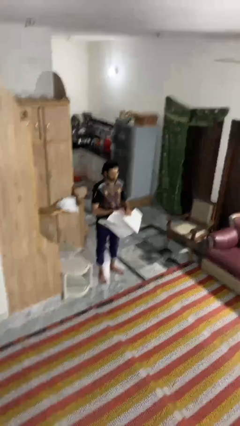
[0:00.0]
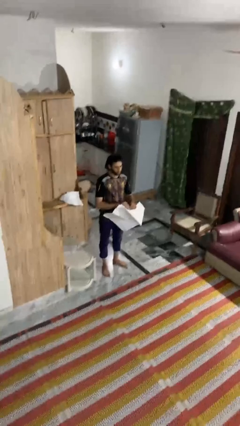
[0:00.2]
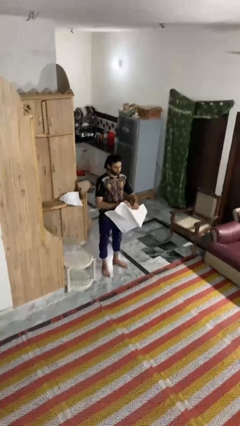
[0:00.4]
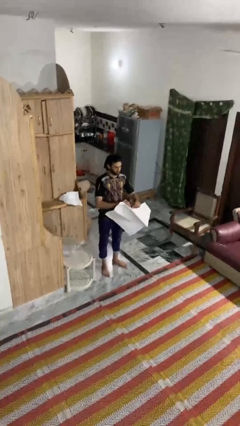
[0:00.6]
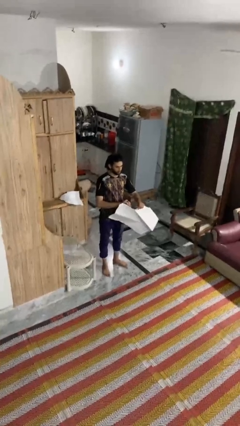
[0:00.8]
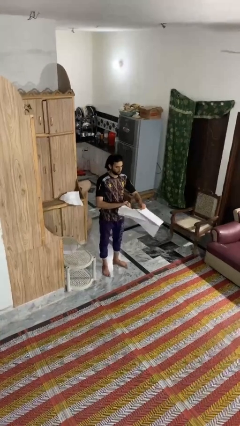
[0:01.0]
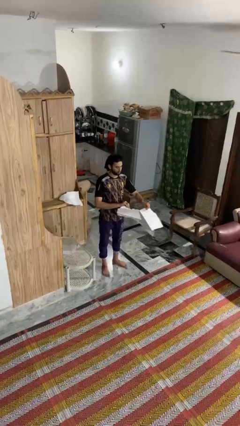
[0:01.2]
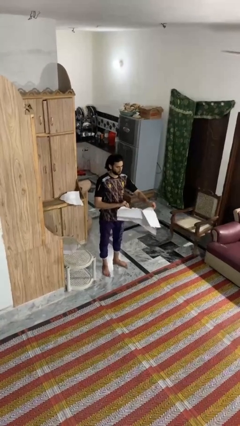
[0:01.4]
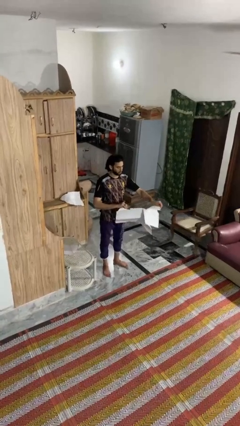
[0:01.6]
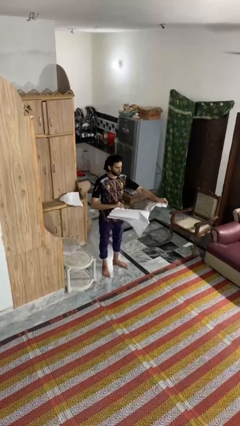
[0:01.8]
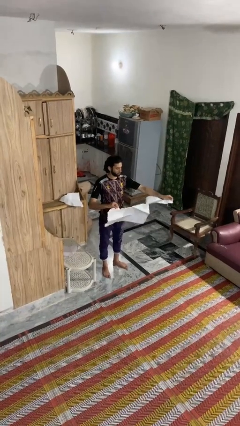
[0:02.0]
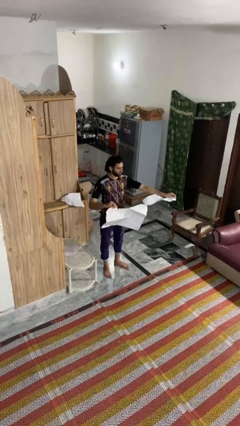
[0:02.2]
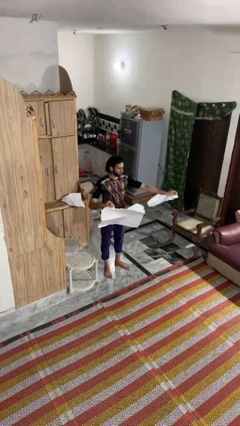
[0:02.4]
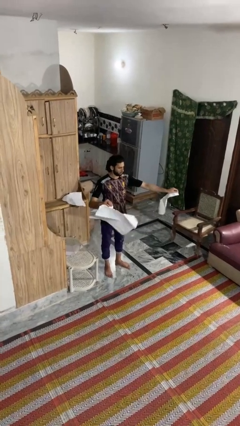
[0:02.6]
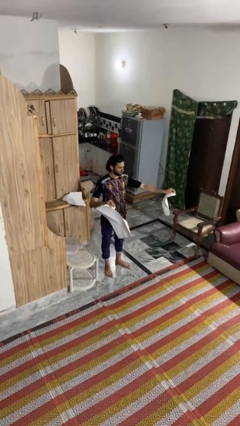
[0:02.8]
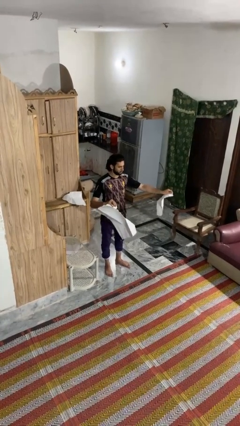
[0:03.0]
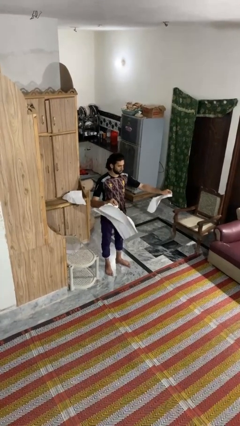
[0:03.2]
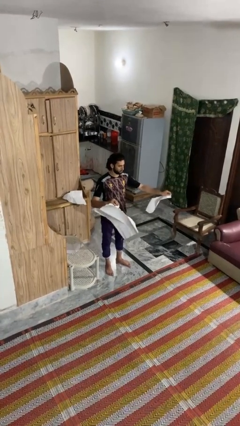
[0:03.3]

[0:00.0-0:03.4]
person tears paper

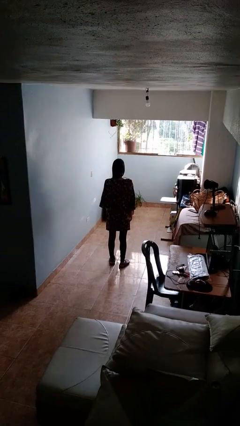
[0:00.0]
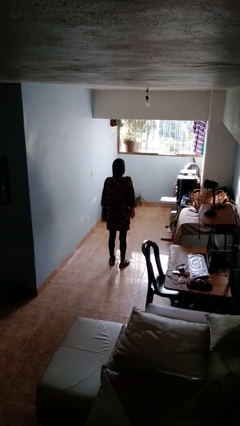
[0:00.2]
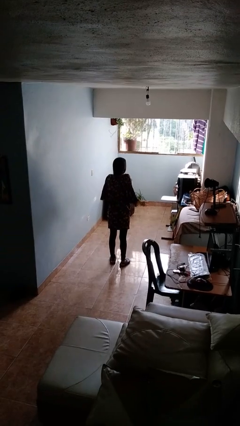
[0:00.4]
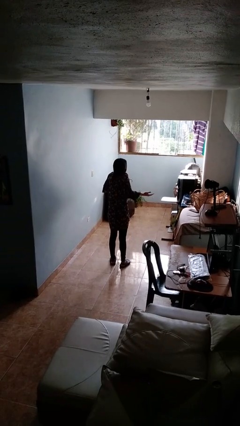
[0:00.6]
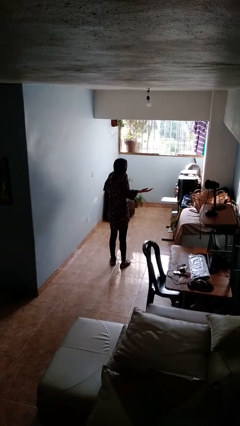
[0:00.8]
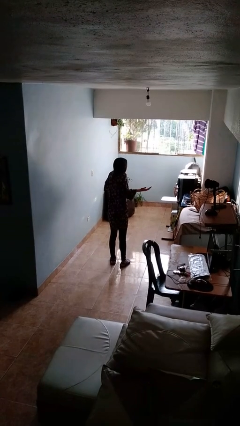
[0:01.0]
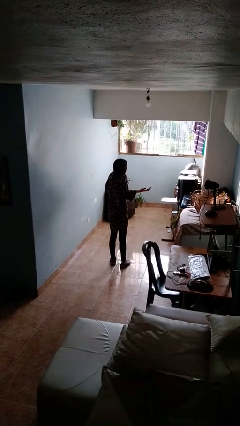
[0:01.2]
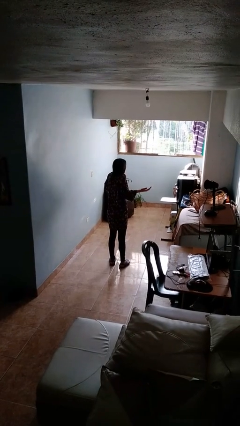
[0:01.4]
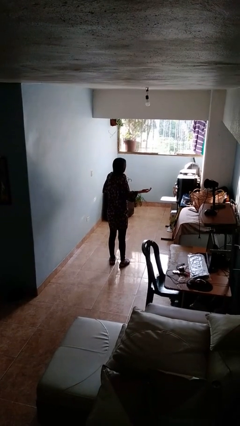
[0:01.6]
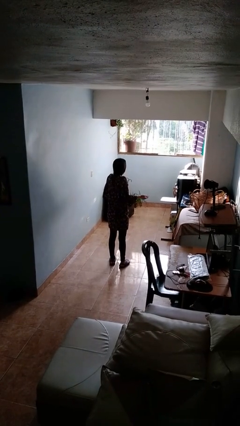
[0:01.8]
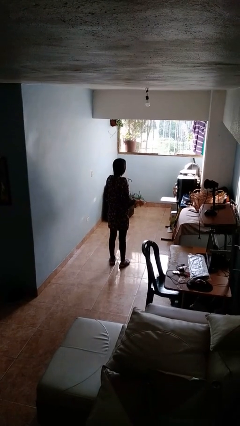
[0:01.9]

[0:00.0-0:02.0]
person shrugs

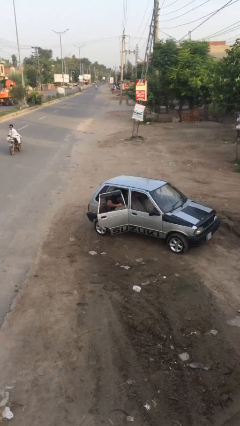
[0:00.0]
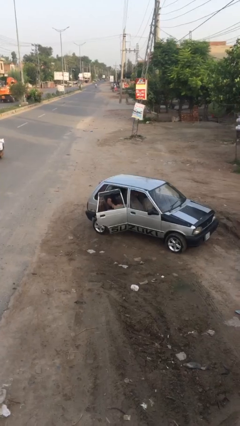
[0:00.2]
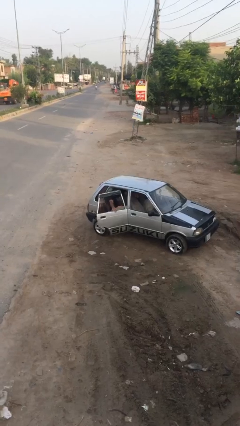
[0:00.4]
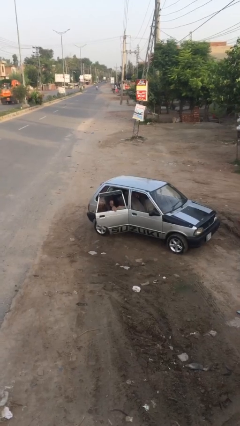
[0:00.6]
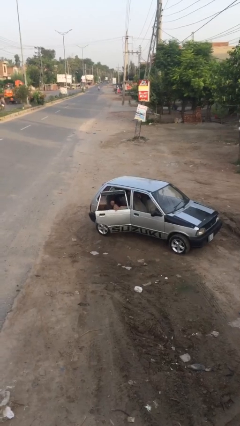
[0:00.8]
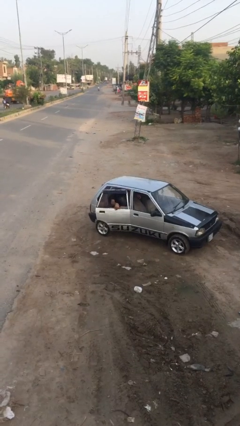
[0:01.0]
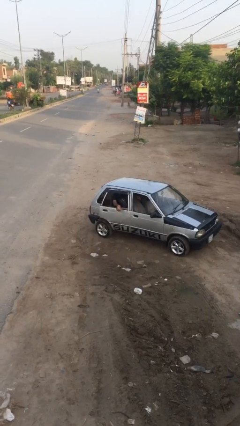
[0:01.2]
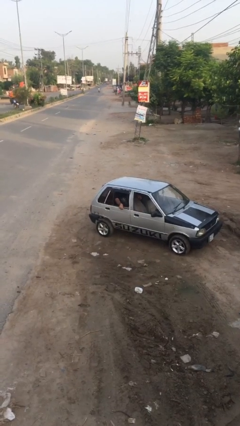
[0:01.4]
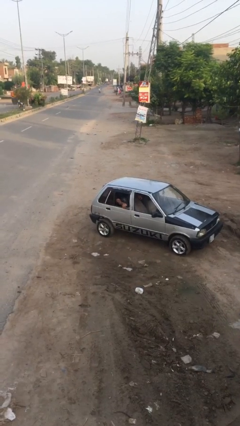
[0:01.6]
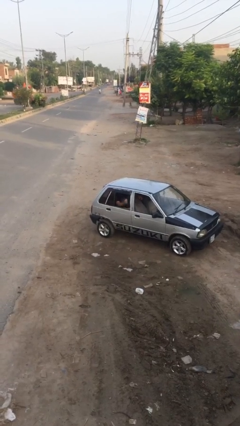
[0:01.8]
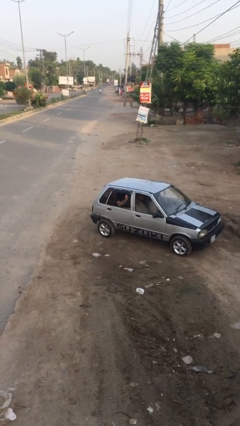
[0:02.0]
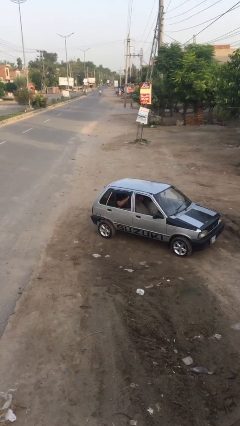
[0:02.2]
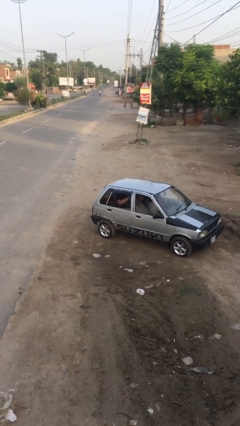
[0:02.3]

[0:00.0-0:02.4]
person closes car door

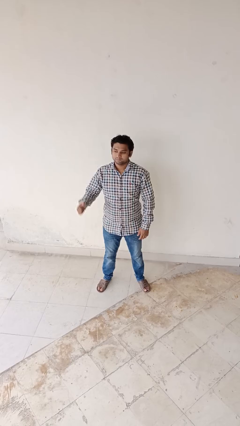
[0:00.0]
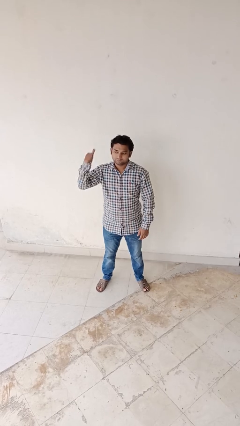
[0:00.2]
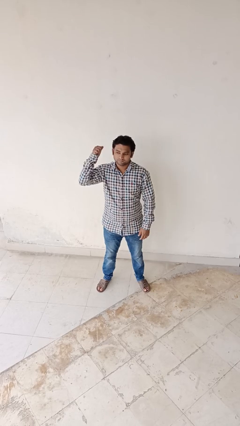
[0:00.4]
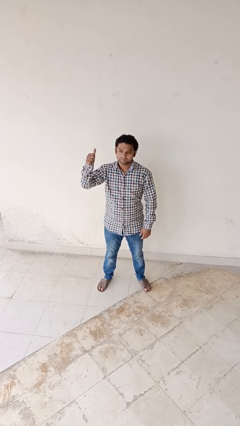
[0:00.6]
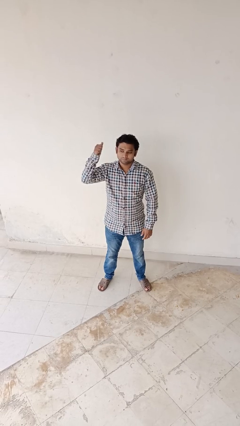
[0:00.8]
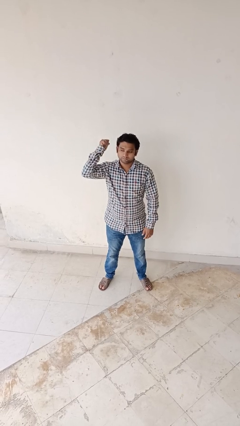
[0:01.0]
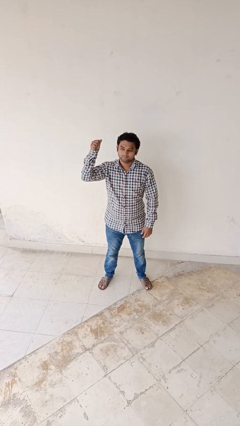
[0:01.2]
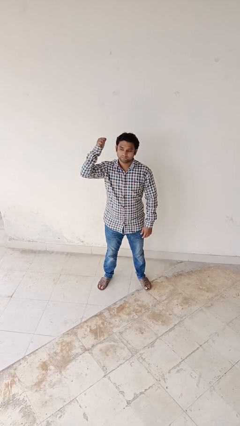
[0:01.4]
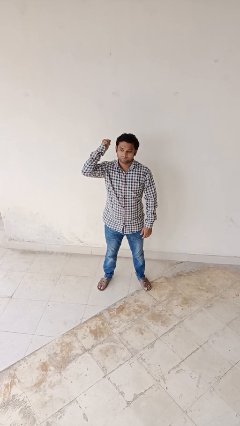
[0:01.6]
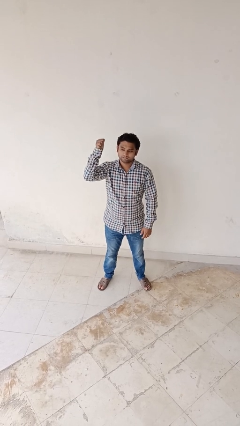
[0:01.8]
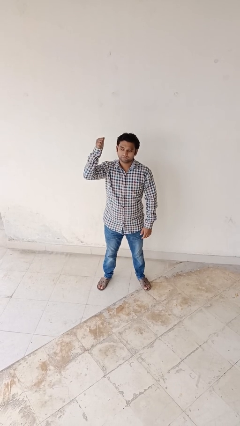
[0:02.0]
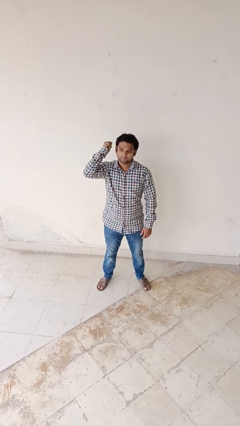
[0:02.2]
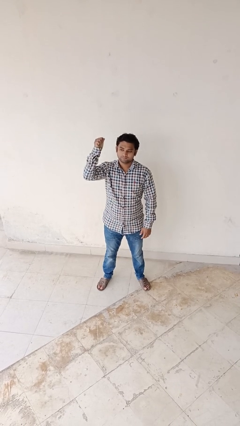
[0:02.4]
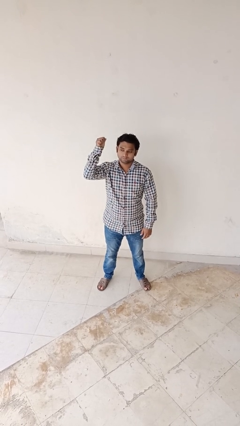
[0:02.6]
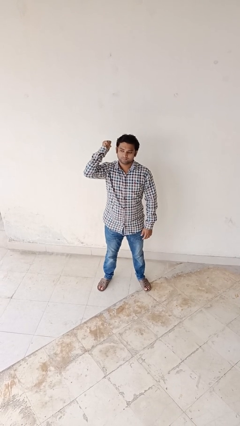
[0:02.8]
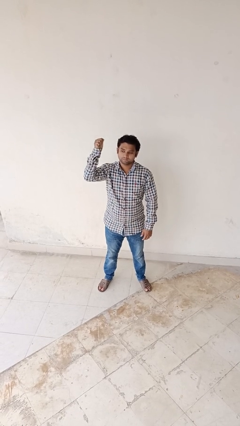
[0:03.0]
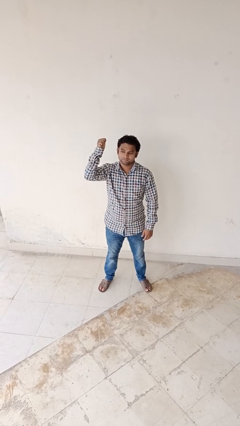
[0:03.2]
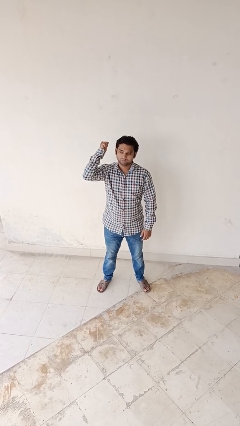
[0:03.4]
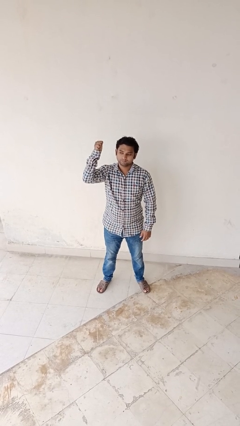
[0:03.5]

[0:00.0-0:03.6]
person gestures behind me

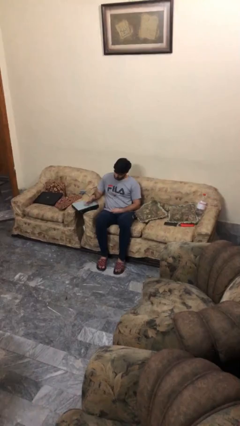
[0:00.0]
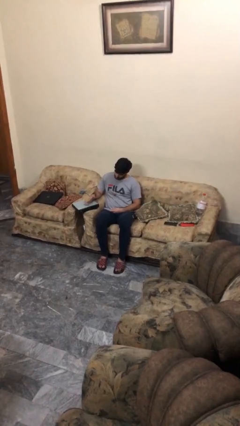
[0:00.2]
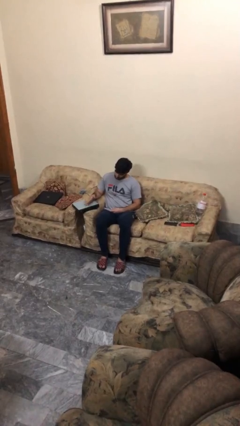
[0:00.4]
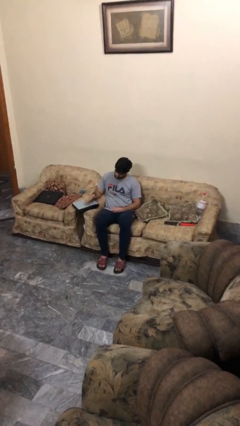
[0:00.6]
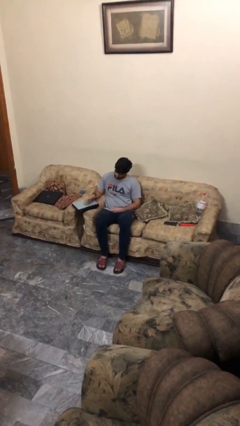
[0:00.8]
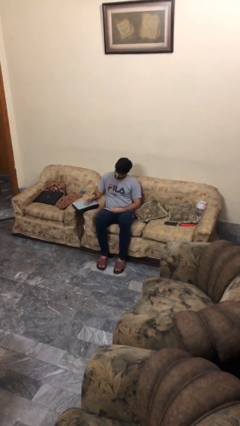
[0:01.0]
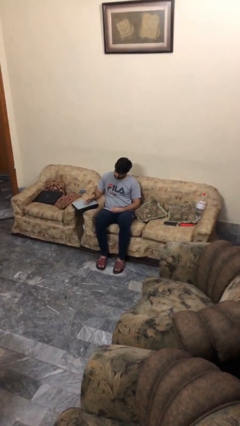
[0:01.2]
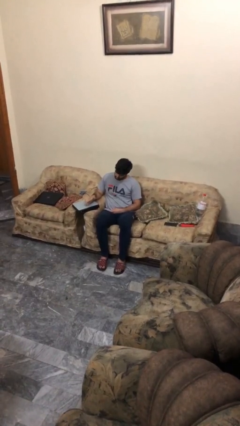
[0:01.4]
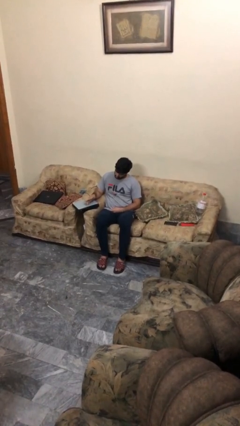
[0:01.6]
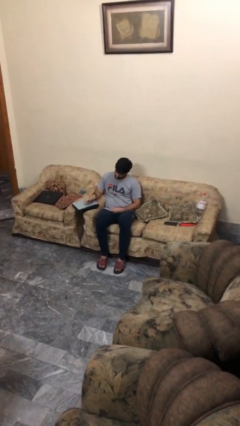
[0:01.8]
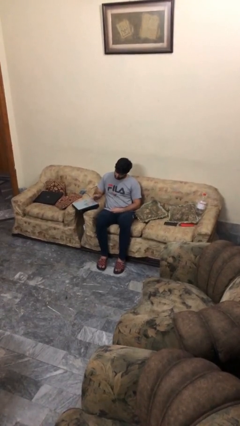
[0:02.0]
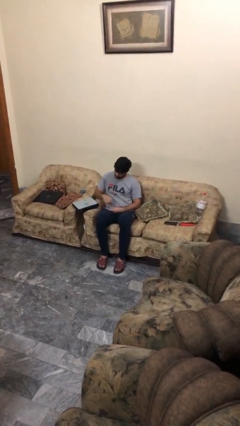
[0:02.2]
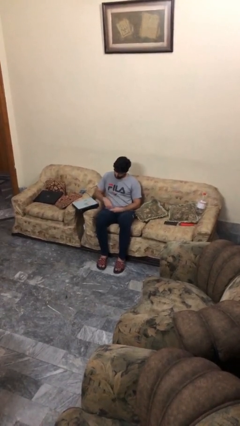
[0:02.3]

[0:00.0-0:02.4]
person taps object with finger

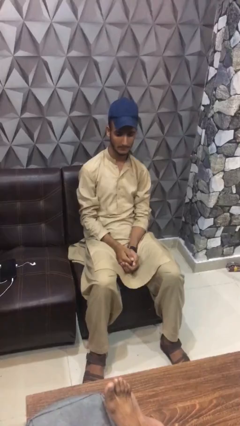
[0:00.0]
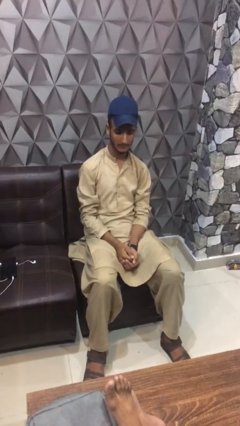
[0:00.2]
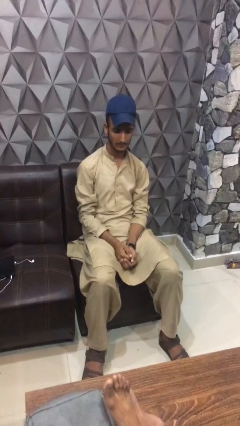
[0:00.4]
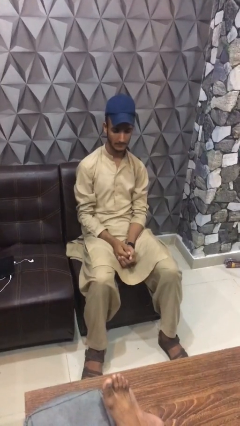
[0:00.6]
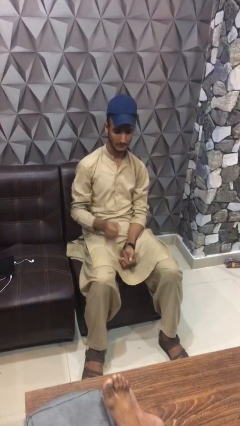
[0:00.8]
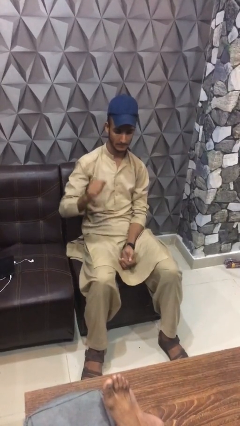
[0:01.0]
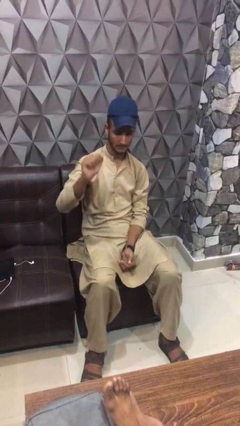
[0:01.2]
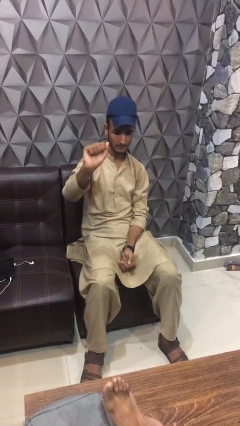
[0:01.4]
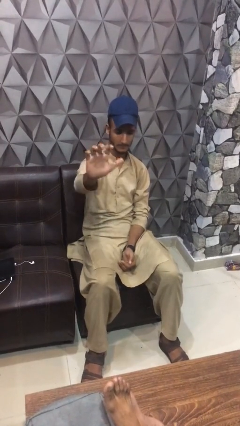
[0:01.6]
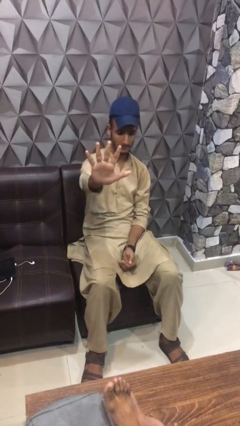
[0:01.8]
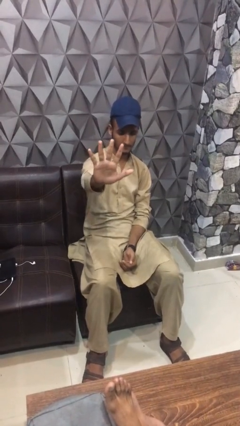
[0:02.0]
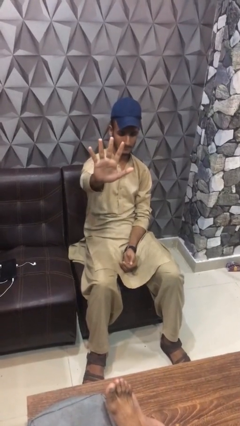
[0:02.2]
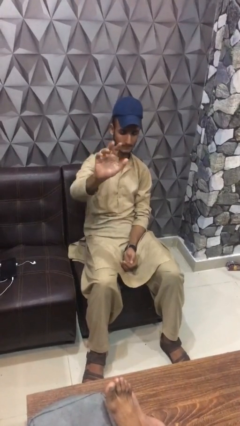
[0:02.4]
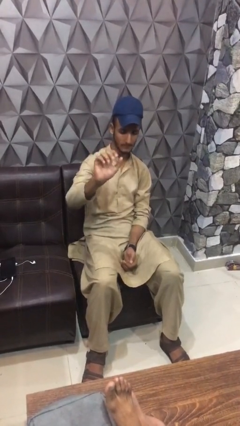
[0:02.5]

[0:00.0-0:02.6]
person gestures number five

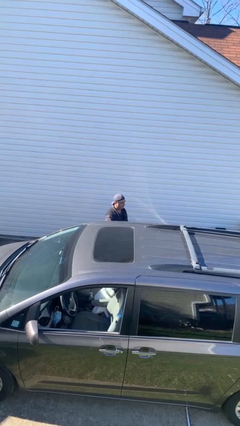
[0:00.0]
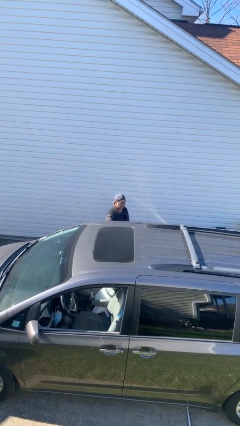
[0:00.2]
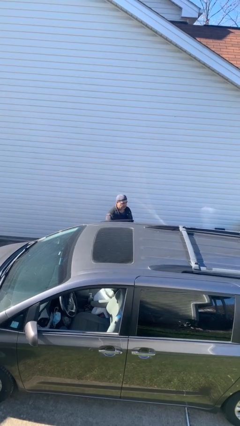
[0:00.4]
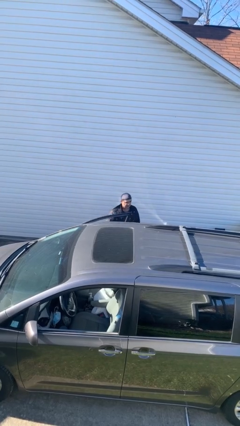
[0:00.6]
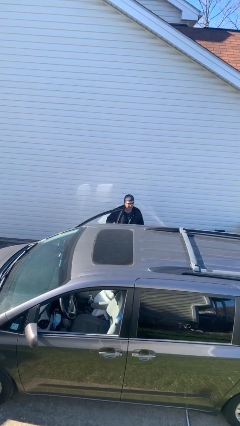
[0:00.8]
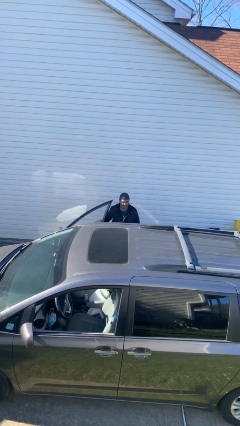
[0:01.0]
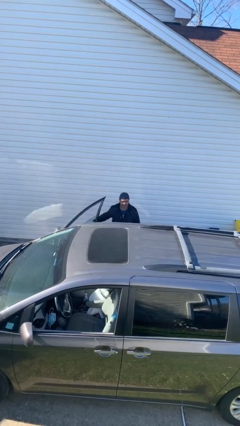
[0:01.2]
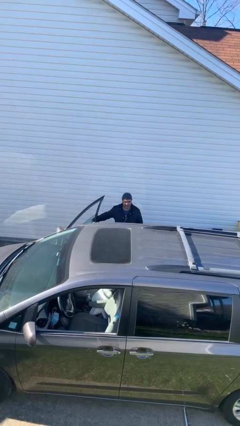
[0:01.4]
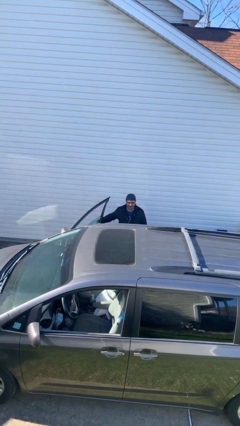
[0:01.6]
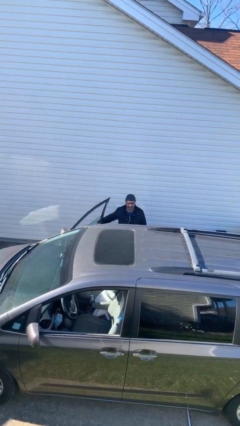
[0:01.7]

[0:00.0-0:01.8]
person opens car door
